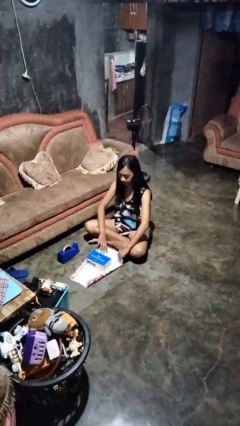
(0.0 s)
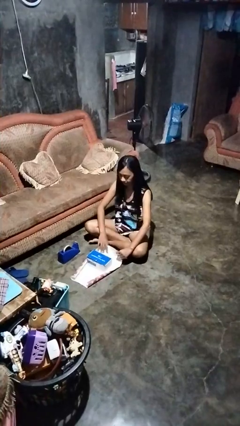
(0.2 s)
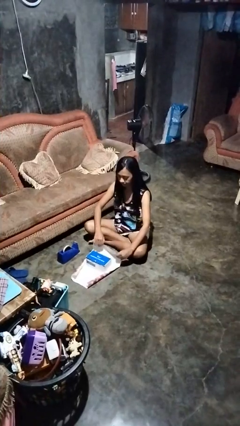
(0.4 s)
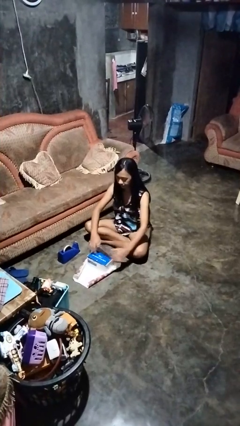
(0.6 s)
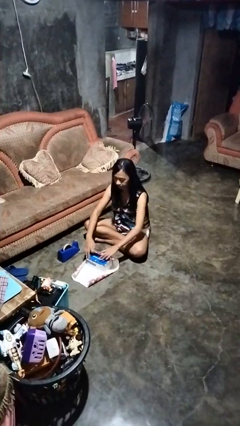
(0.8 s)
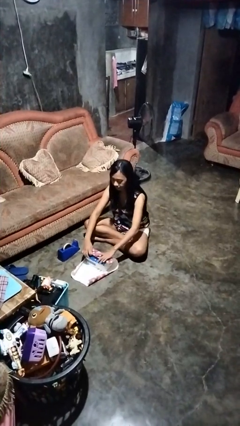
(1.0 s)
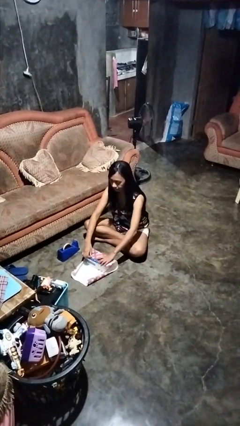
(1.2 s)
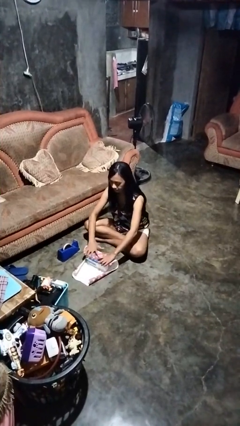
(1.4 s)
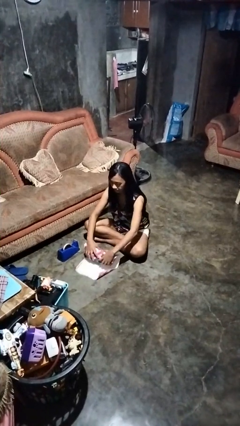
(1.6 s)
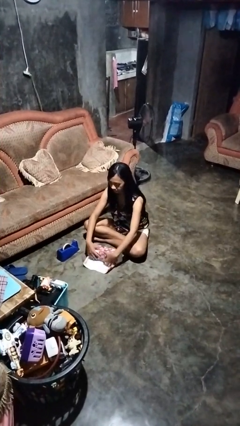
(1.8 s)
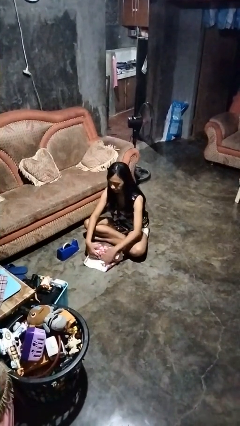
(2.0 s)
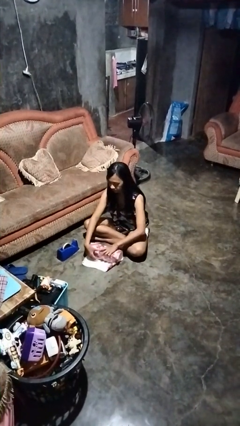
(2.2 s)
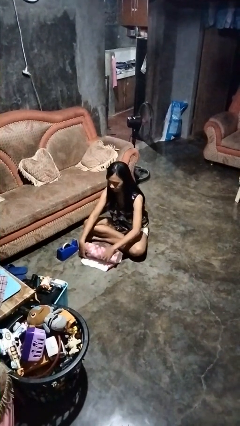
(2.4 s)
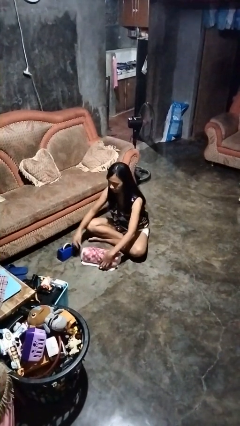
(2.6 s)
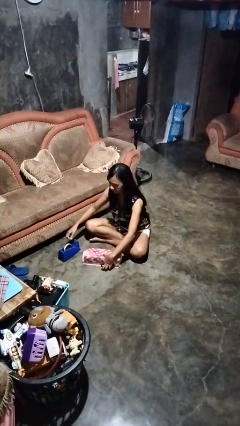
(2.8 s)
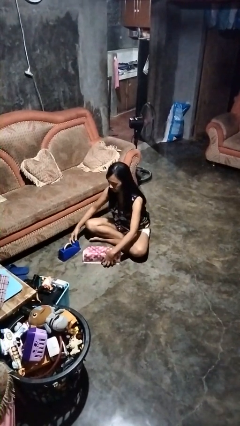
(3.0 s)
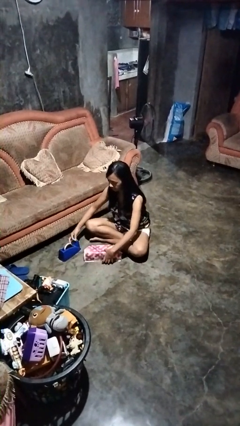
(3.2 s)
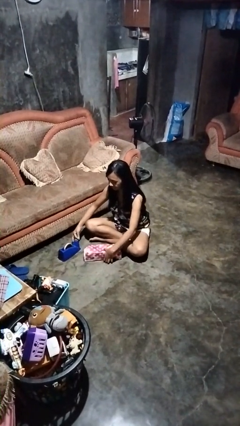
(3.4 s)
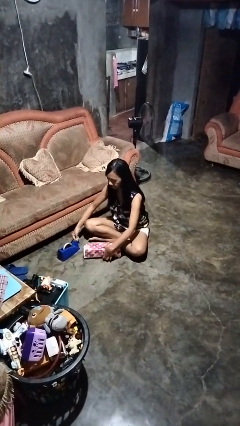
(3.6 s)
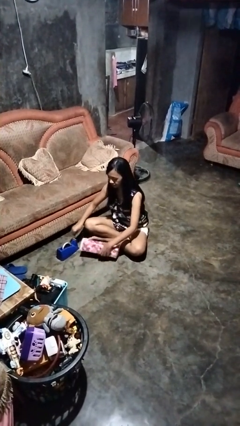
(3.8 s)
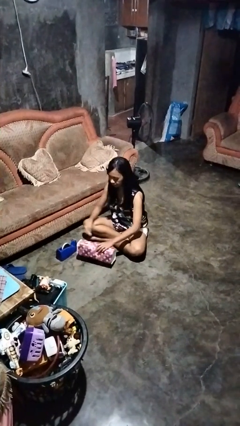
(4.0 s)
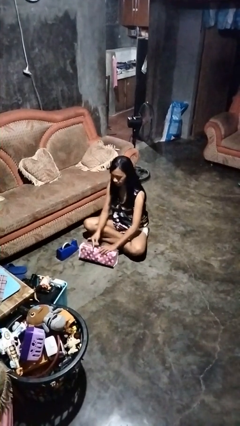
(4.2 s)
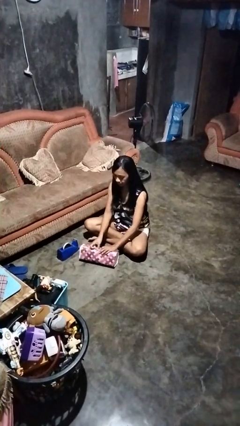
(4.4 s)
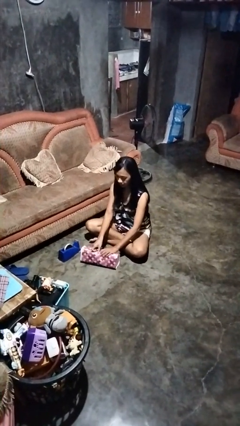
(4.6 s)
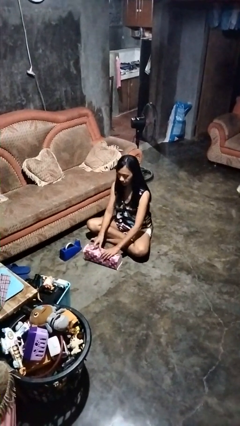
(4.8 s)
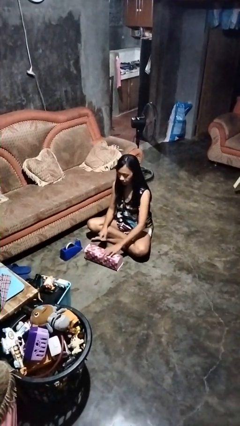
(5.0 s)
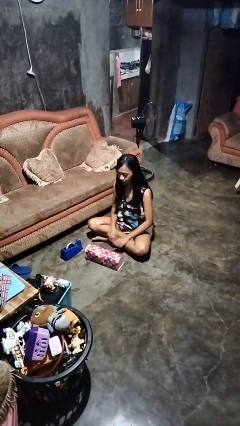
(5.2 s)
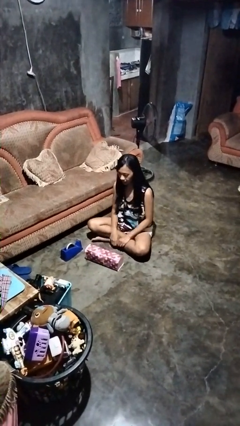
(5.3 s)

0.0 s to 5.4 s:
person wraps box

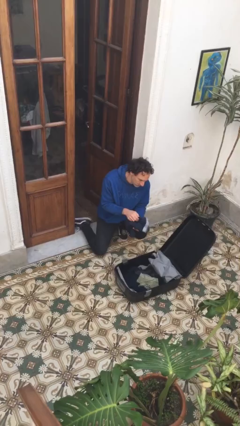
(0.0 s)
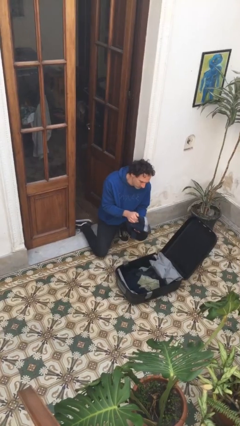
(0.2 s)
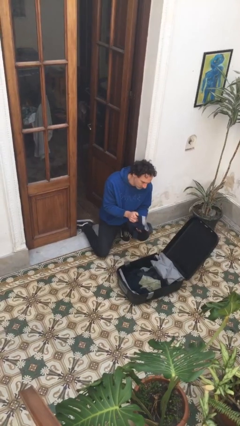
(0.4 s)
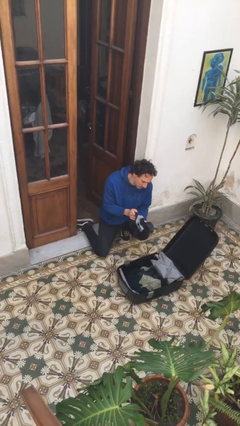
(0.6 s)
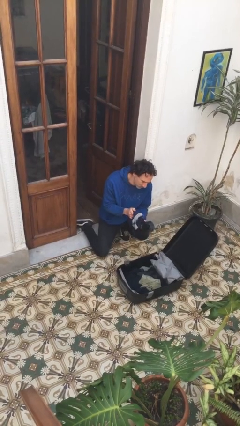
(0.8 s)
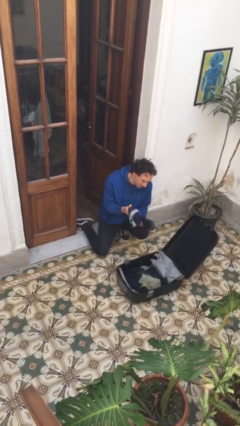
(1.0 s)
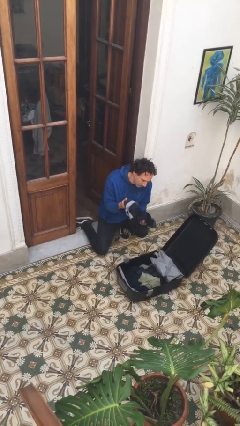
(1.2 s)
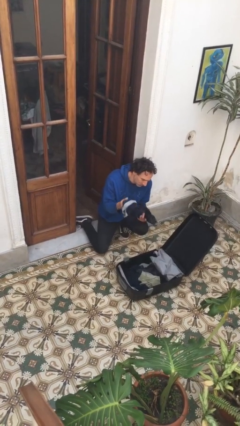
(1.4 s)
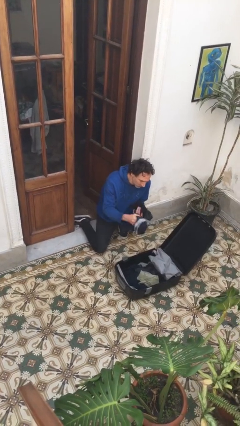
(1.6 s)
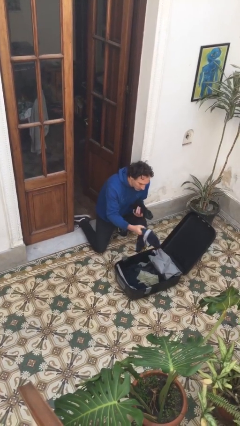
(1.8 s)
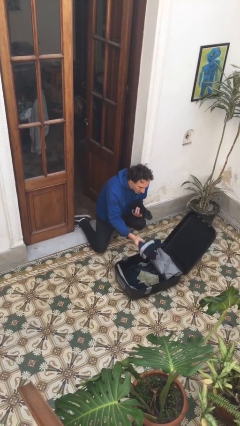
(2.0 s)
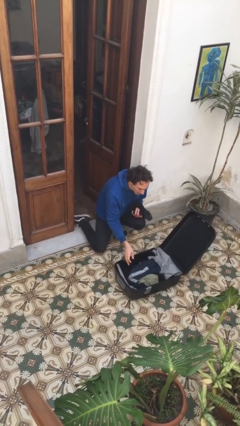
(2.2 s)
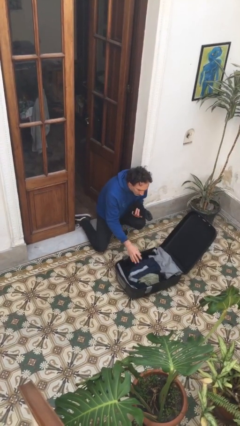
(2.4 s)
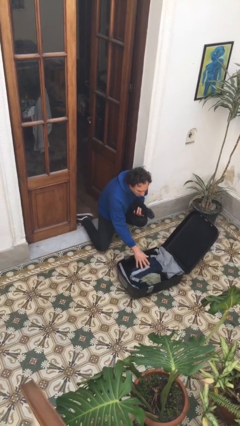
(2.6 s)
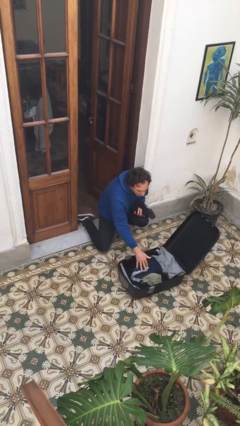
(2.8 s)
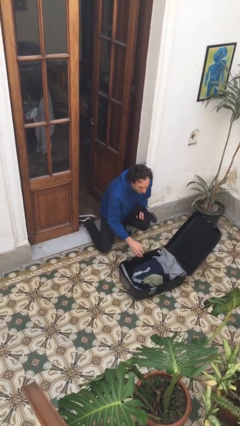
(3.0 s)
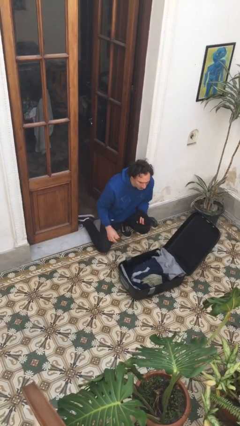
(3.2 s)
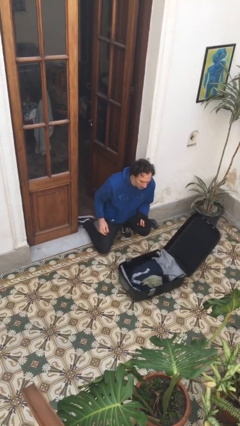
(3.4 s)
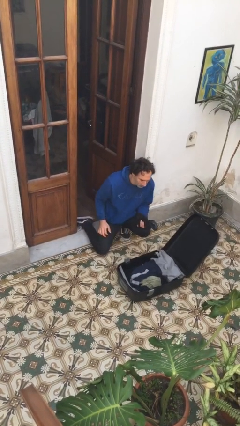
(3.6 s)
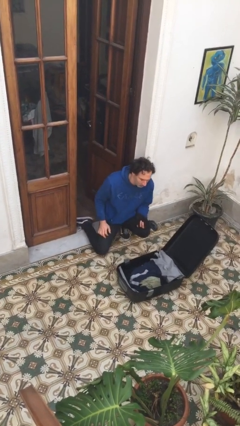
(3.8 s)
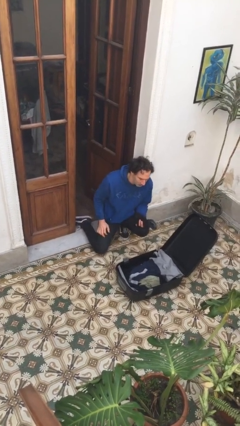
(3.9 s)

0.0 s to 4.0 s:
person loads clothes into suitcase

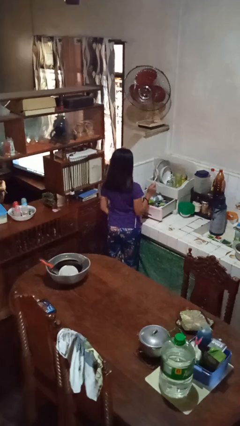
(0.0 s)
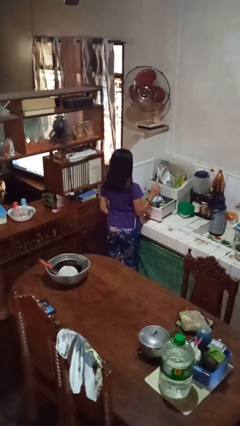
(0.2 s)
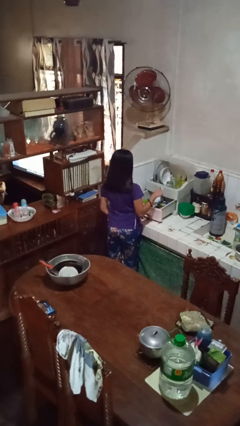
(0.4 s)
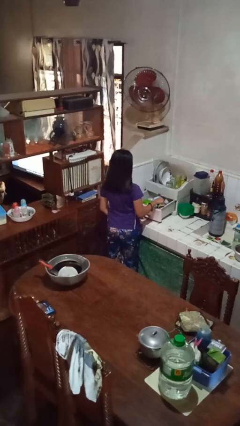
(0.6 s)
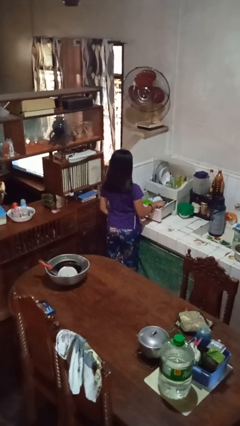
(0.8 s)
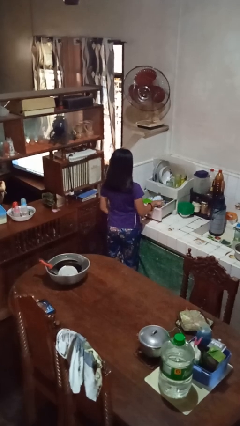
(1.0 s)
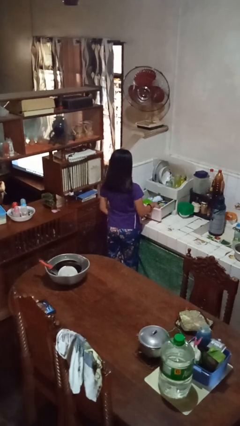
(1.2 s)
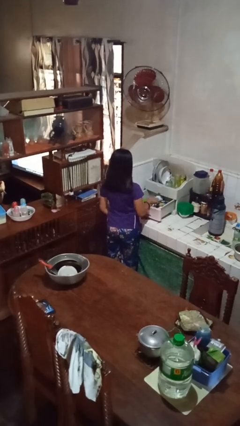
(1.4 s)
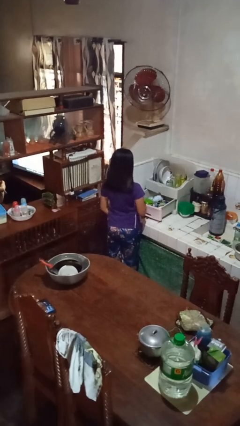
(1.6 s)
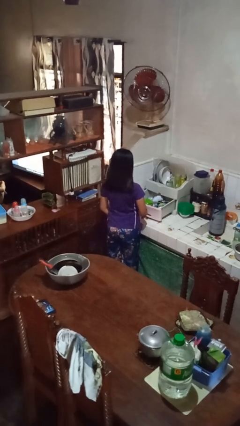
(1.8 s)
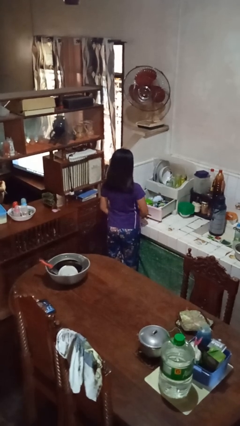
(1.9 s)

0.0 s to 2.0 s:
person puts object into kitchen drawer

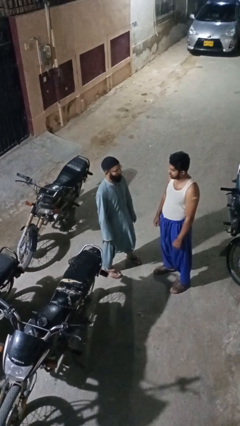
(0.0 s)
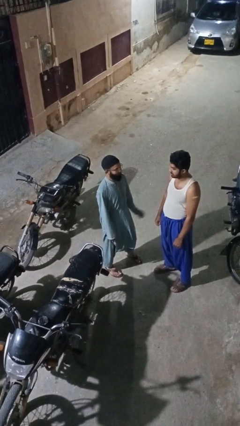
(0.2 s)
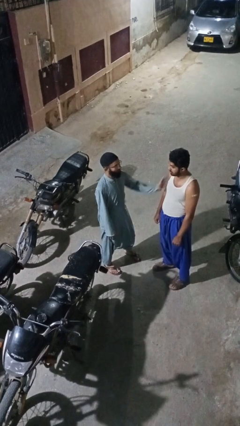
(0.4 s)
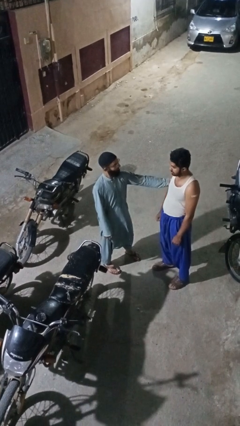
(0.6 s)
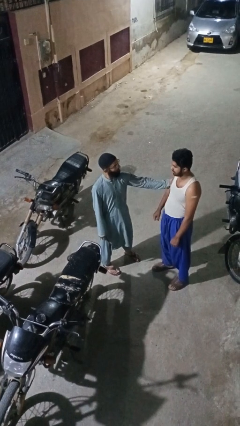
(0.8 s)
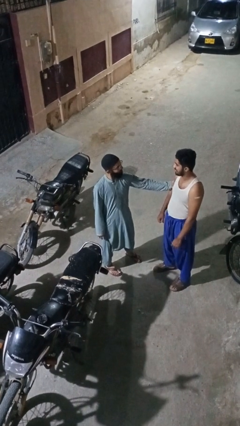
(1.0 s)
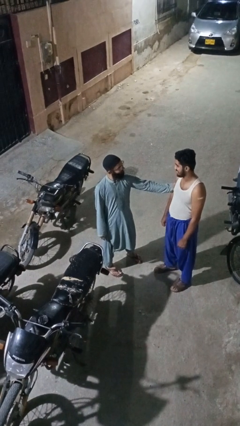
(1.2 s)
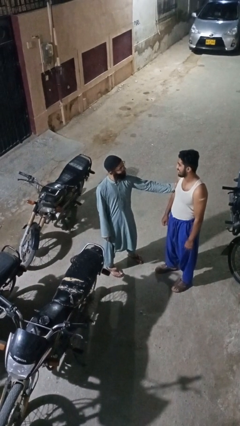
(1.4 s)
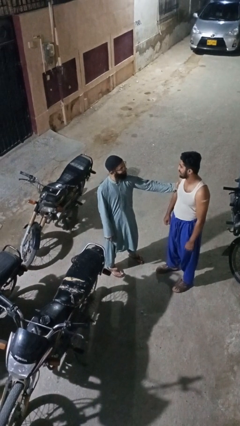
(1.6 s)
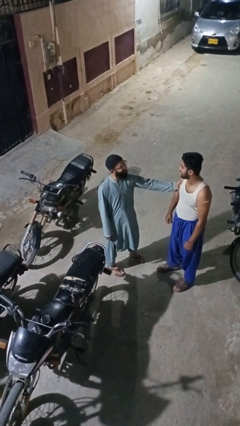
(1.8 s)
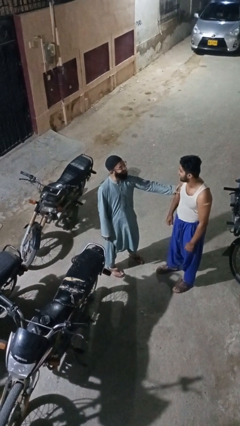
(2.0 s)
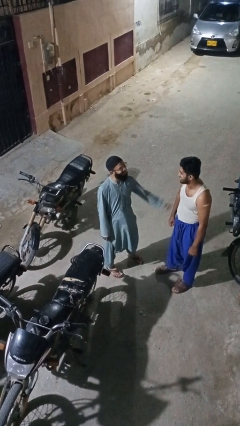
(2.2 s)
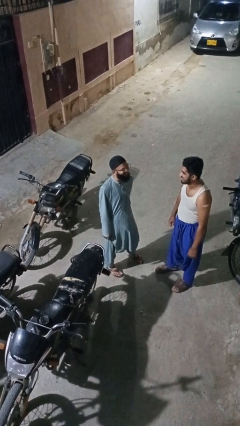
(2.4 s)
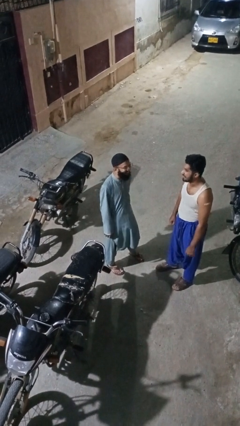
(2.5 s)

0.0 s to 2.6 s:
person grabs person by bicep

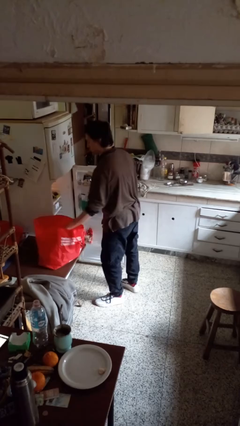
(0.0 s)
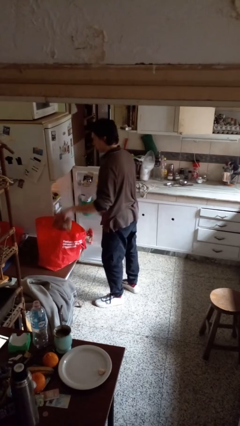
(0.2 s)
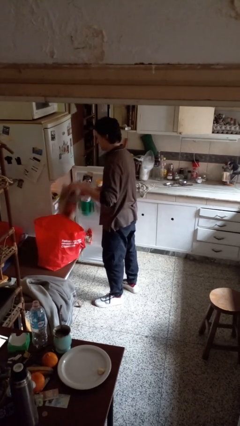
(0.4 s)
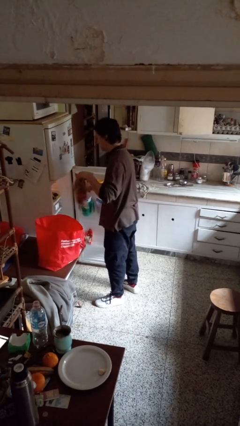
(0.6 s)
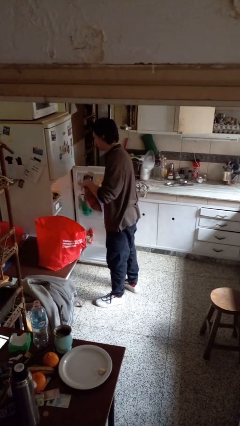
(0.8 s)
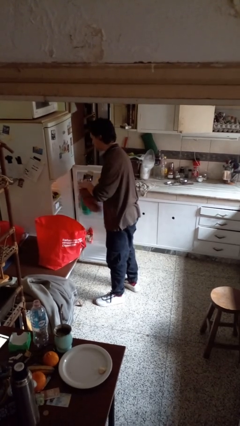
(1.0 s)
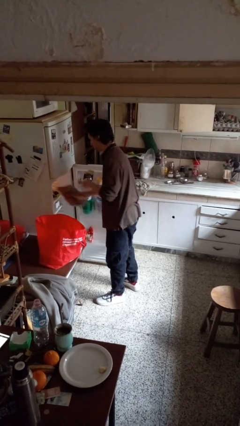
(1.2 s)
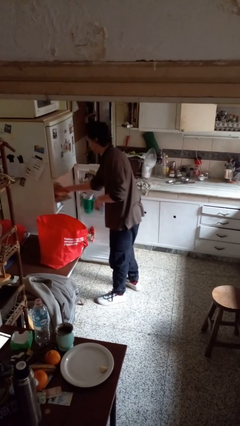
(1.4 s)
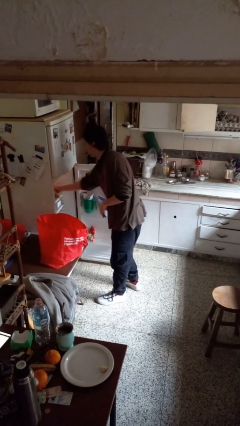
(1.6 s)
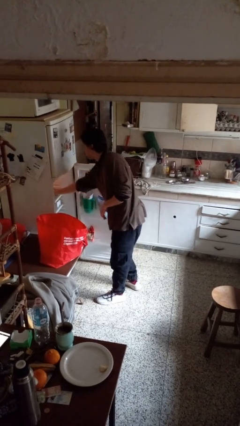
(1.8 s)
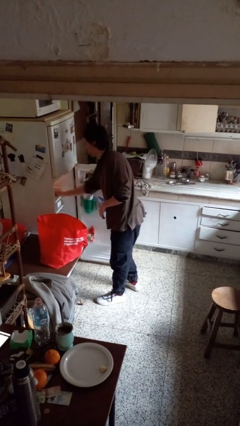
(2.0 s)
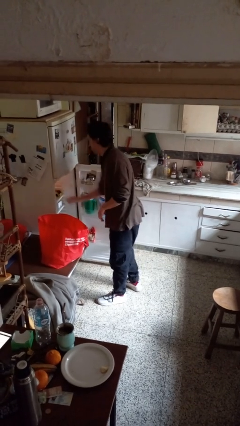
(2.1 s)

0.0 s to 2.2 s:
person loads groceries into refrigerator

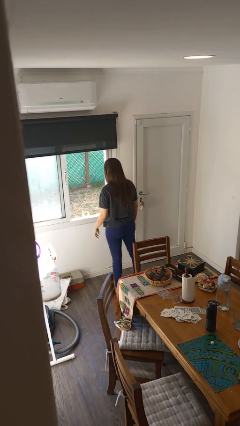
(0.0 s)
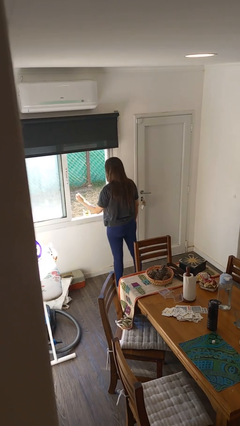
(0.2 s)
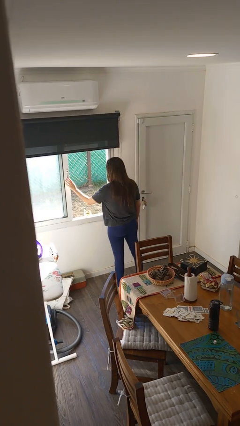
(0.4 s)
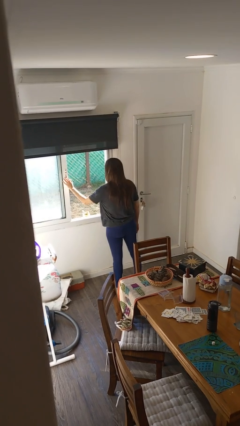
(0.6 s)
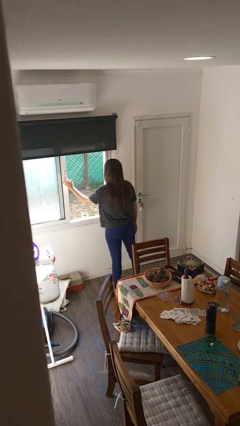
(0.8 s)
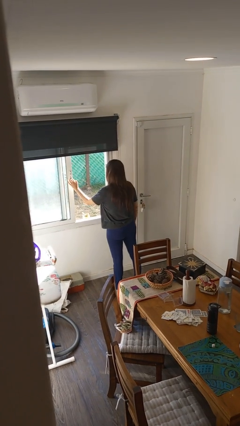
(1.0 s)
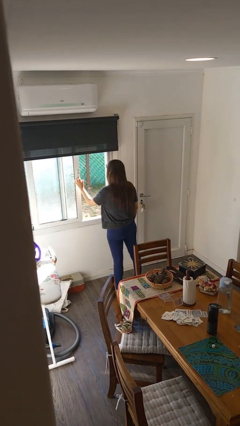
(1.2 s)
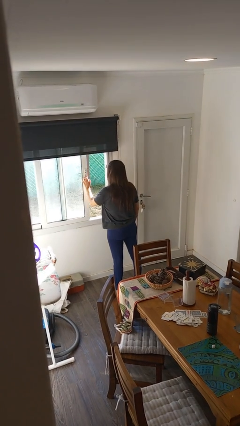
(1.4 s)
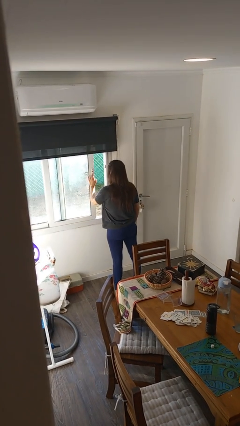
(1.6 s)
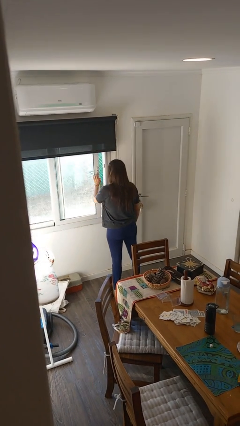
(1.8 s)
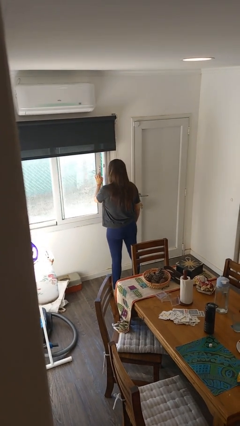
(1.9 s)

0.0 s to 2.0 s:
person closes home window
